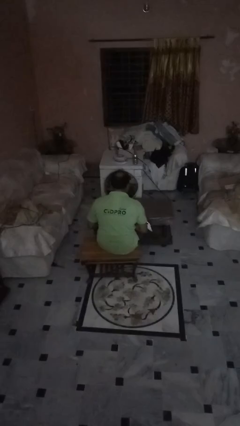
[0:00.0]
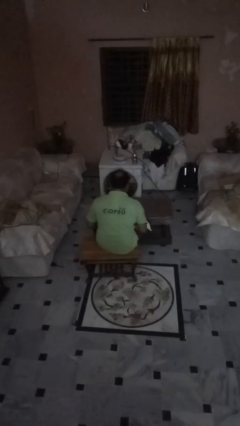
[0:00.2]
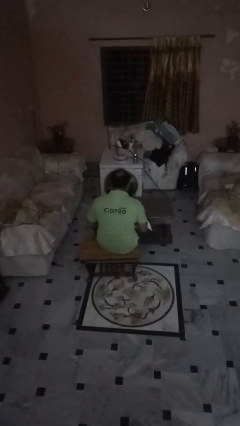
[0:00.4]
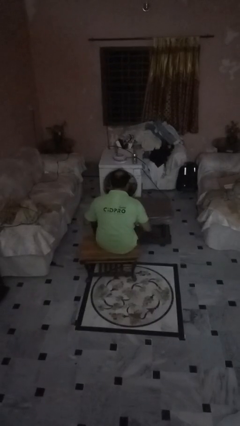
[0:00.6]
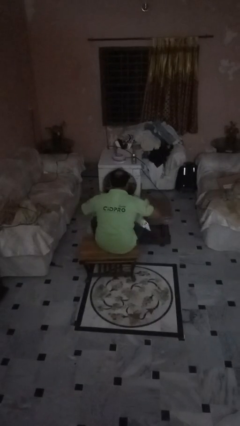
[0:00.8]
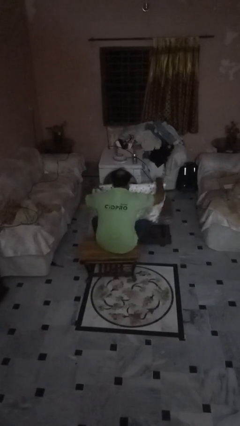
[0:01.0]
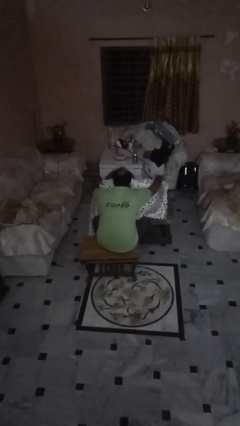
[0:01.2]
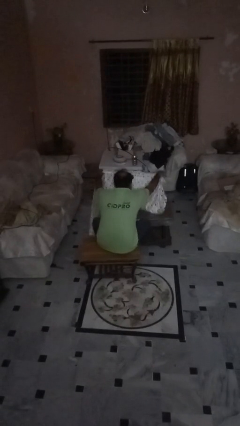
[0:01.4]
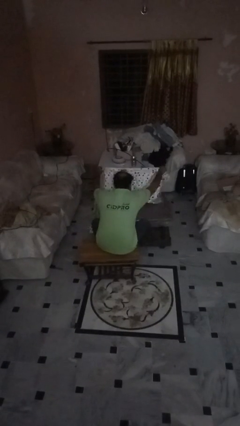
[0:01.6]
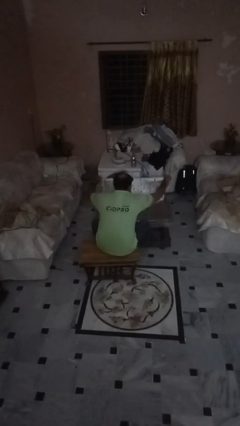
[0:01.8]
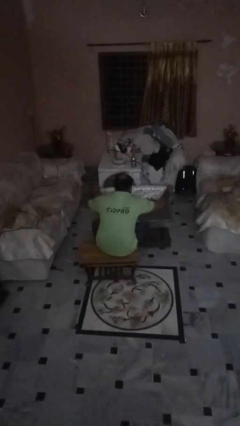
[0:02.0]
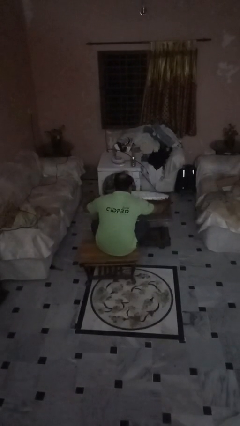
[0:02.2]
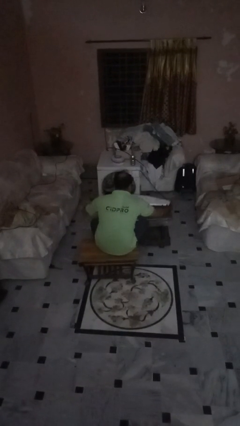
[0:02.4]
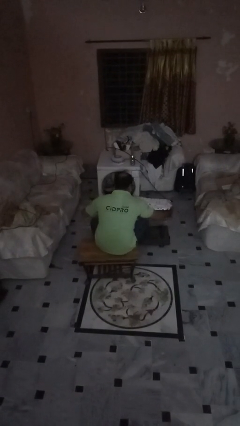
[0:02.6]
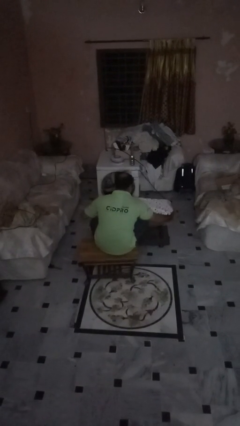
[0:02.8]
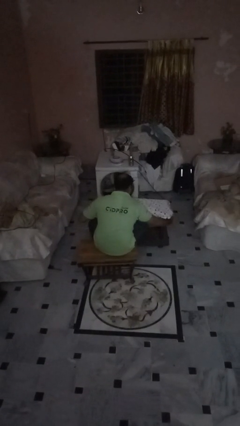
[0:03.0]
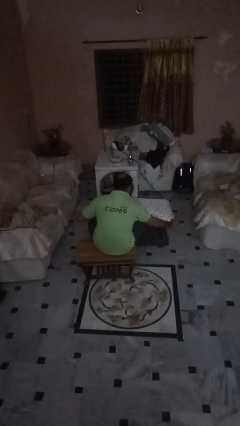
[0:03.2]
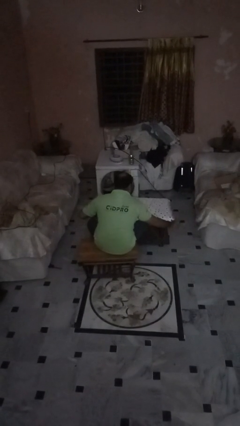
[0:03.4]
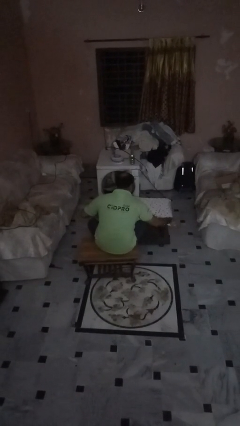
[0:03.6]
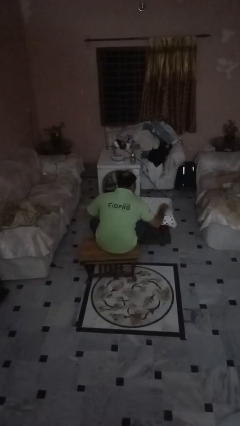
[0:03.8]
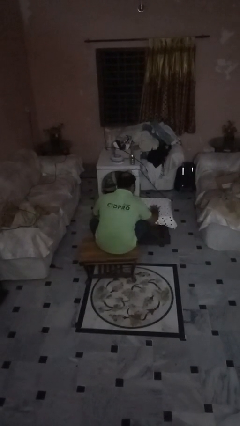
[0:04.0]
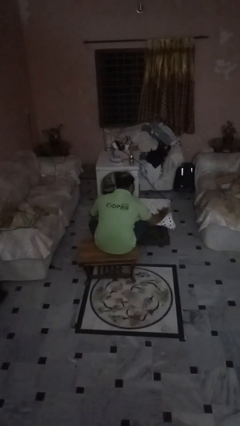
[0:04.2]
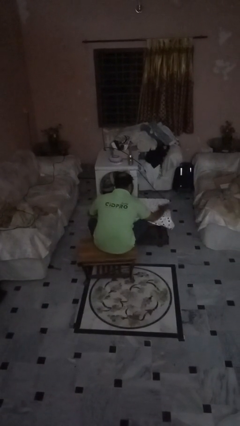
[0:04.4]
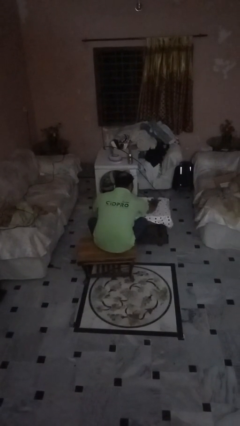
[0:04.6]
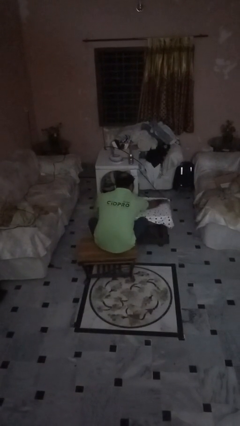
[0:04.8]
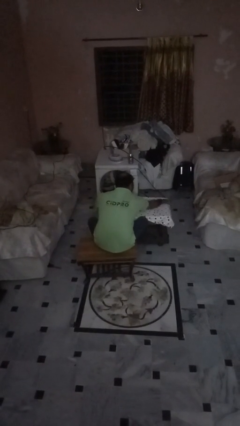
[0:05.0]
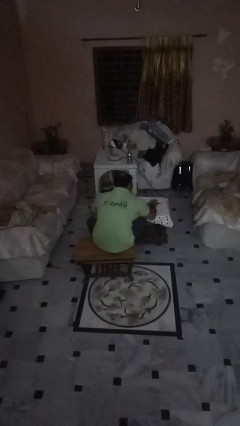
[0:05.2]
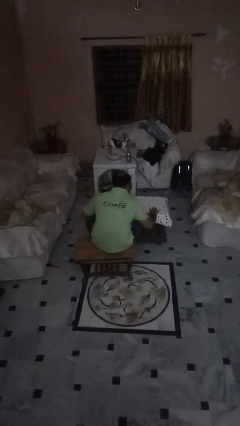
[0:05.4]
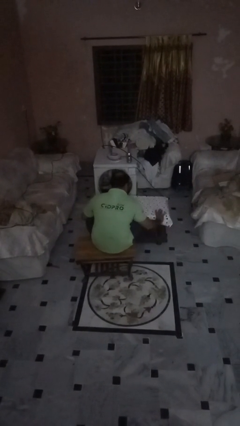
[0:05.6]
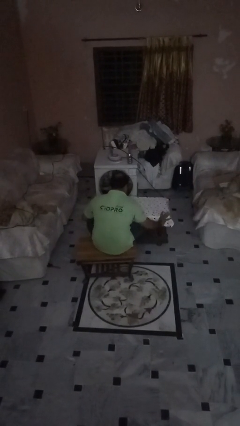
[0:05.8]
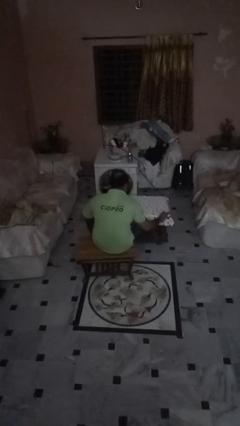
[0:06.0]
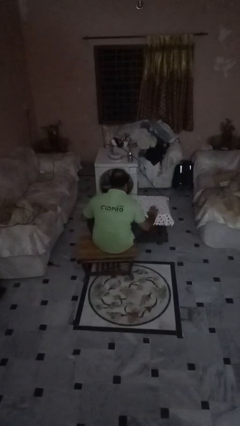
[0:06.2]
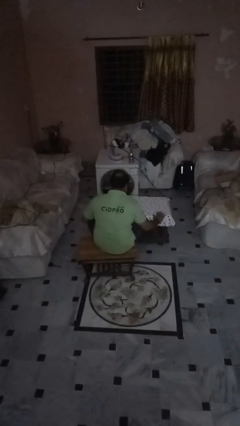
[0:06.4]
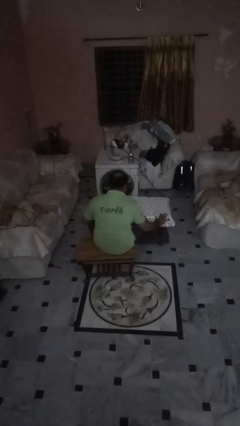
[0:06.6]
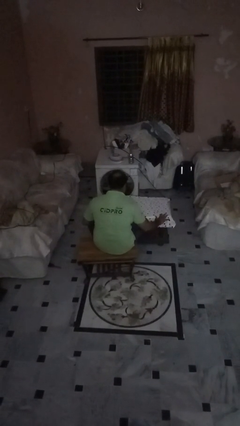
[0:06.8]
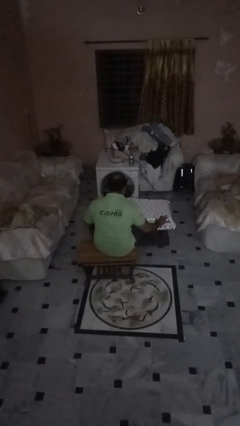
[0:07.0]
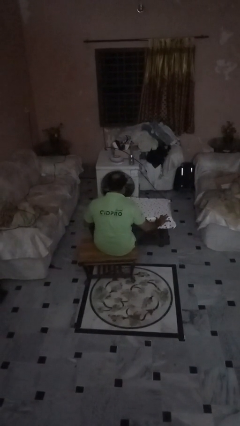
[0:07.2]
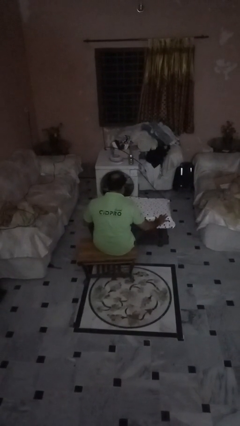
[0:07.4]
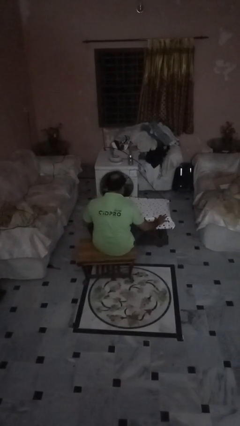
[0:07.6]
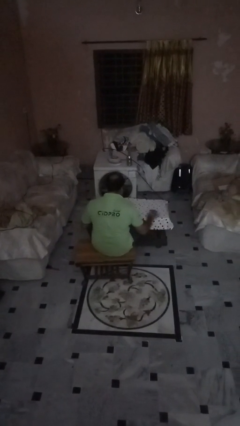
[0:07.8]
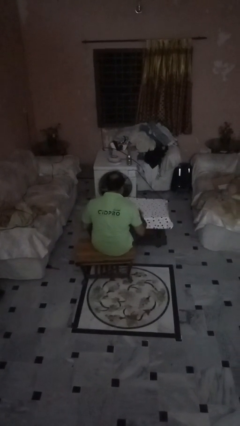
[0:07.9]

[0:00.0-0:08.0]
person spreads tablecloth

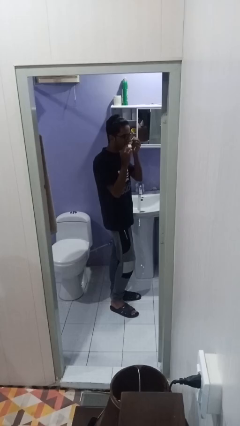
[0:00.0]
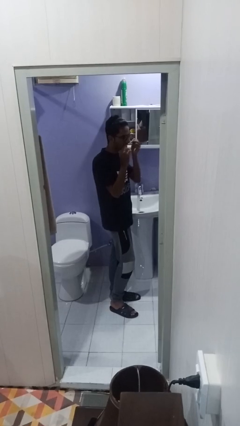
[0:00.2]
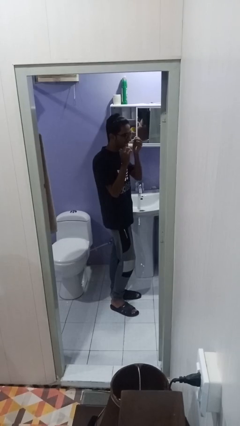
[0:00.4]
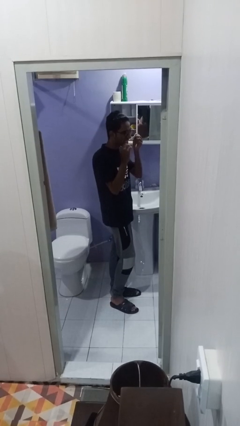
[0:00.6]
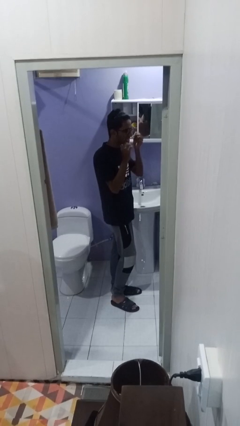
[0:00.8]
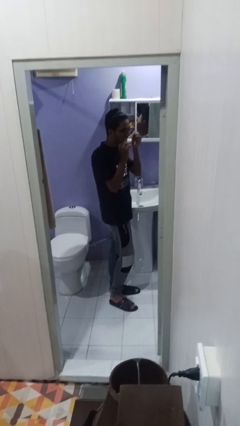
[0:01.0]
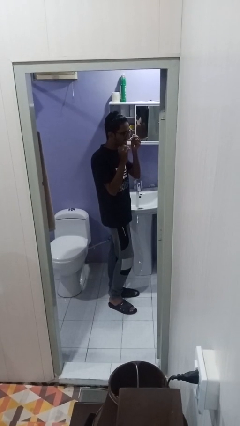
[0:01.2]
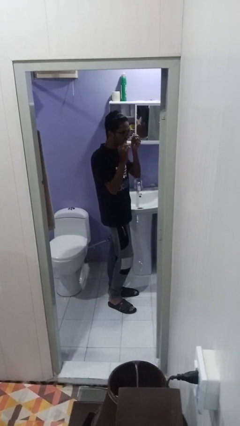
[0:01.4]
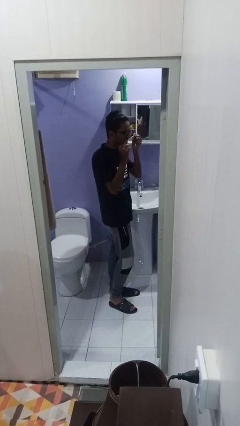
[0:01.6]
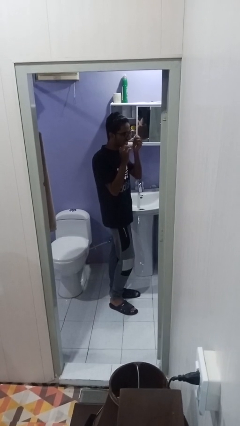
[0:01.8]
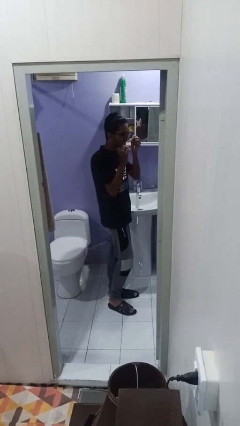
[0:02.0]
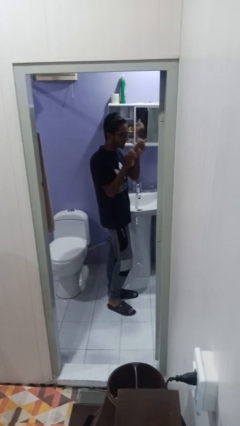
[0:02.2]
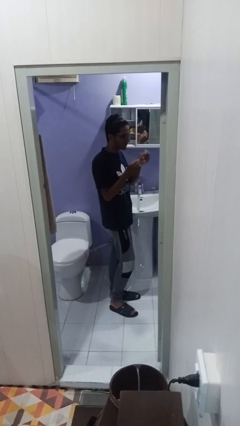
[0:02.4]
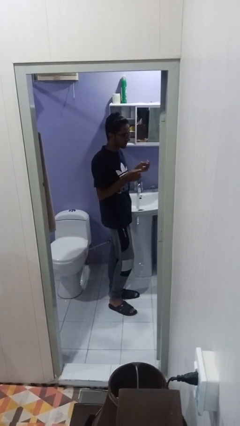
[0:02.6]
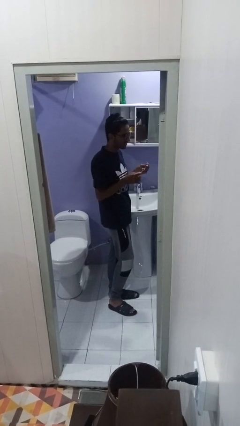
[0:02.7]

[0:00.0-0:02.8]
person flosses

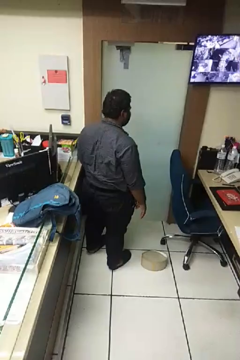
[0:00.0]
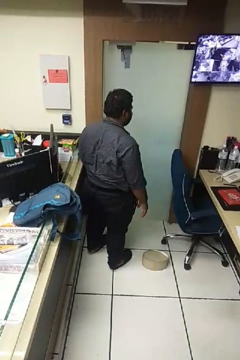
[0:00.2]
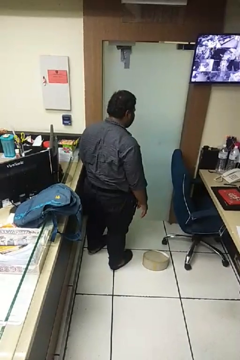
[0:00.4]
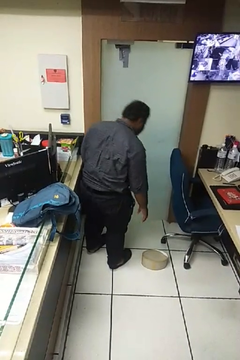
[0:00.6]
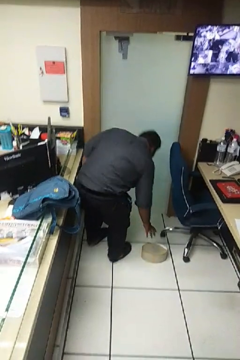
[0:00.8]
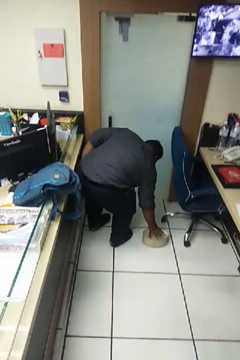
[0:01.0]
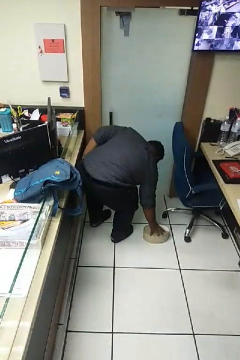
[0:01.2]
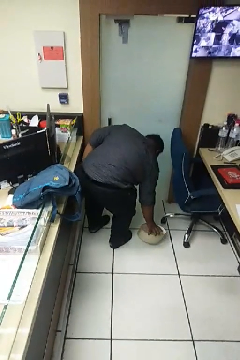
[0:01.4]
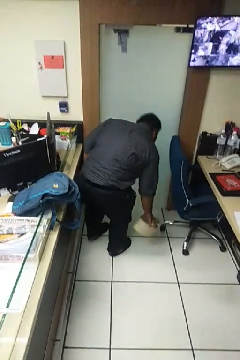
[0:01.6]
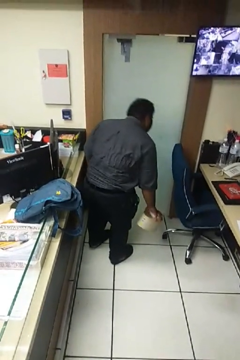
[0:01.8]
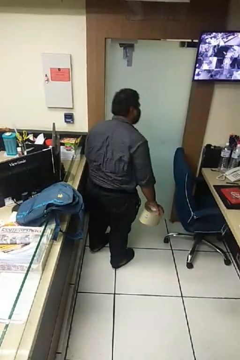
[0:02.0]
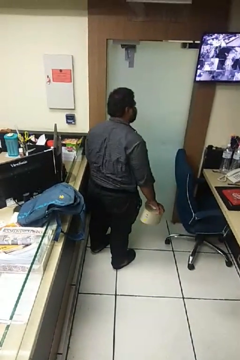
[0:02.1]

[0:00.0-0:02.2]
person picks up object from floor

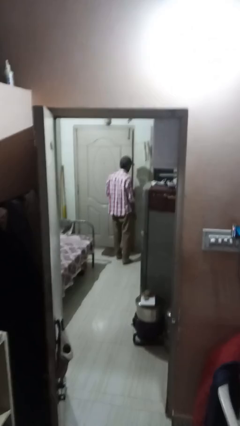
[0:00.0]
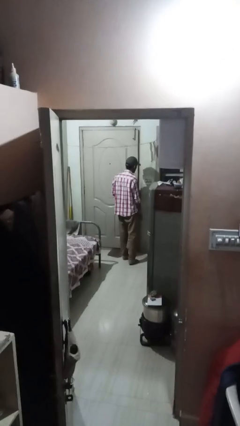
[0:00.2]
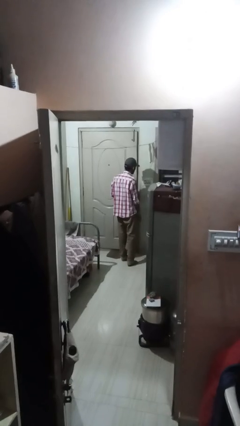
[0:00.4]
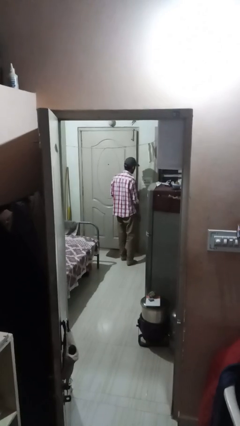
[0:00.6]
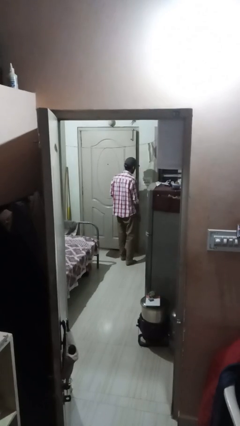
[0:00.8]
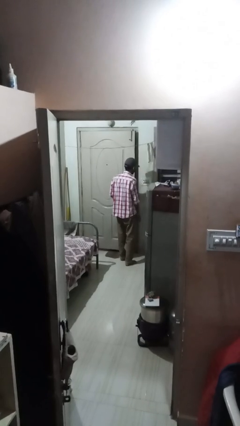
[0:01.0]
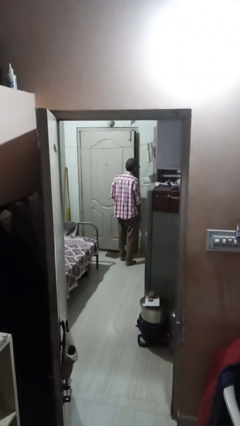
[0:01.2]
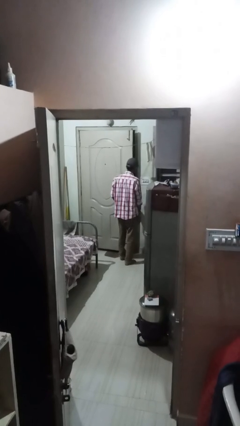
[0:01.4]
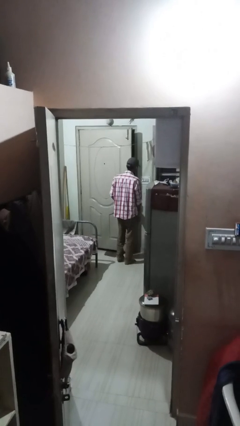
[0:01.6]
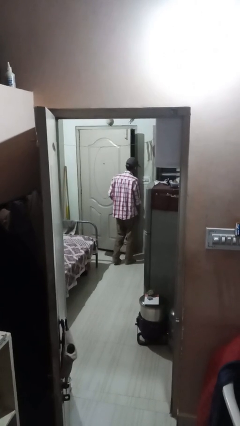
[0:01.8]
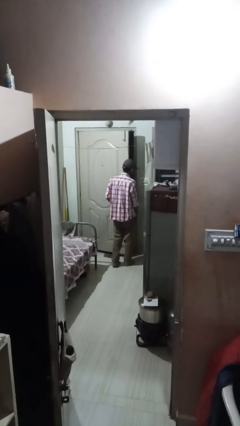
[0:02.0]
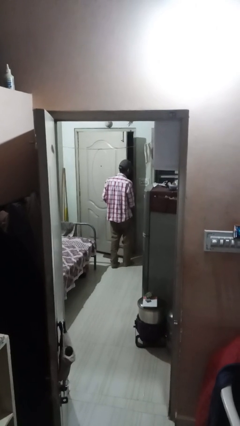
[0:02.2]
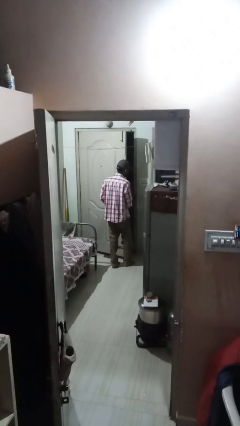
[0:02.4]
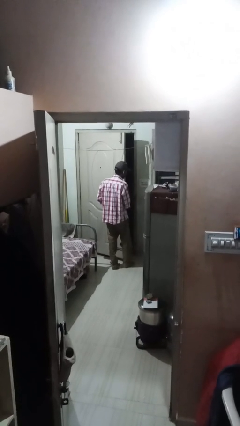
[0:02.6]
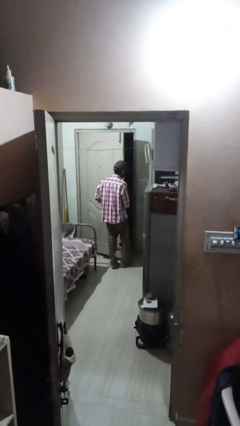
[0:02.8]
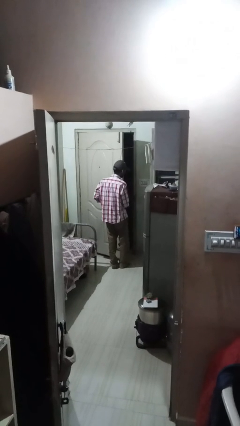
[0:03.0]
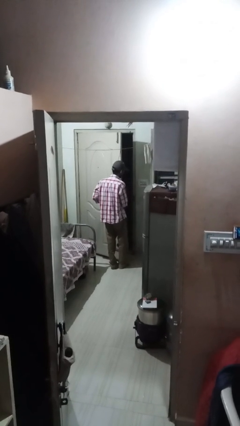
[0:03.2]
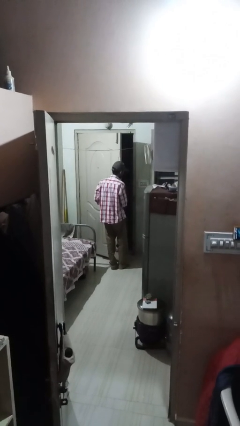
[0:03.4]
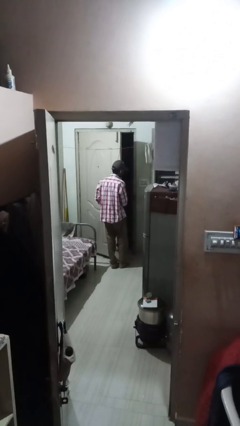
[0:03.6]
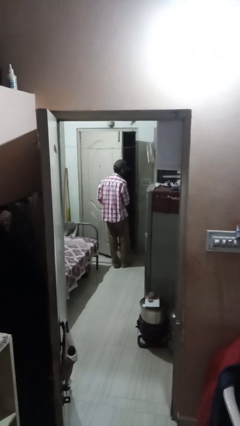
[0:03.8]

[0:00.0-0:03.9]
person opens facility door

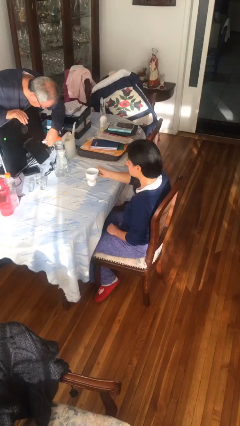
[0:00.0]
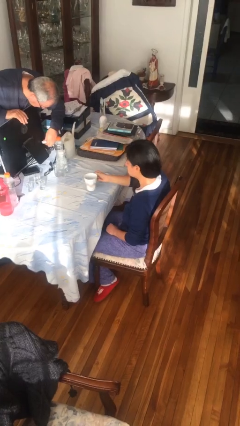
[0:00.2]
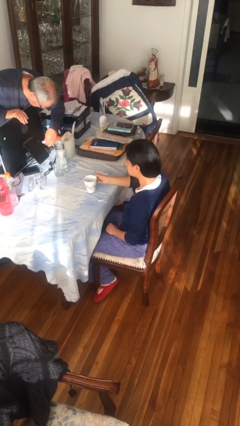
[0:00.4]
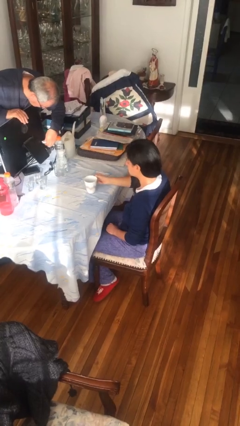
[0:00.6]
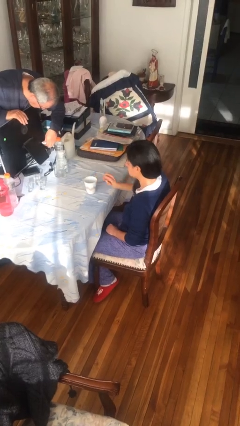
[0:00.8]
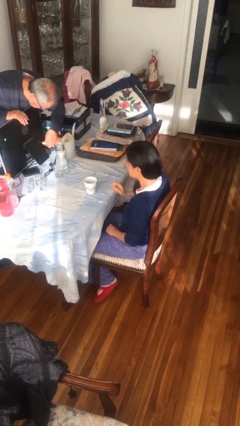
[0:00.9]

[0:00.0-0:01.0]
person puts down object on table

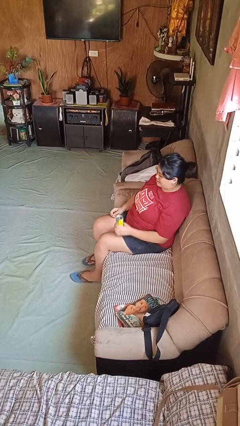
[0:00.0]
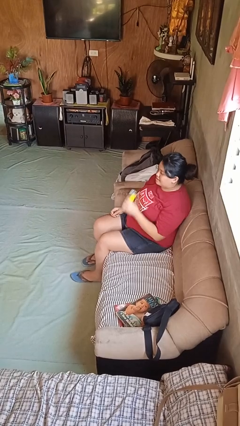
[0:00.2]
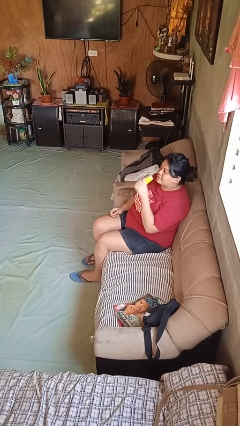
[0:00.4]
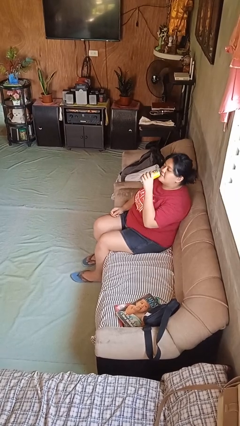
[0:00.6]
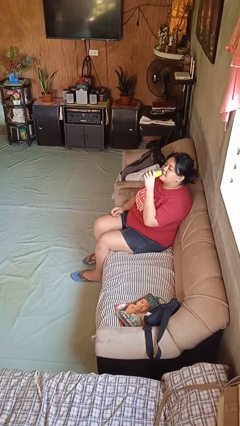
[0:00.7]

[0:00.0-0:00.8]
person drinks from beverage can
